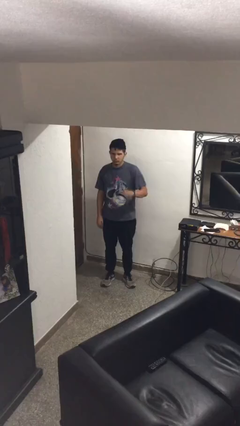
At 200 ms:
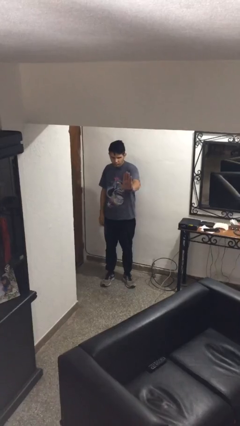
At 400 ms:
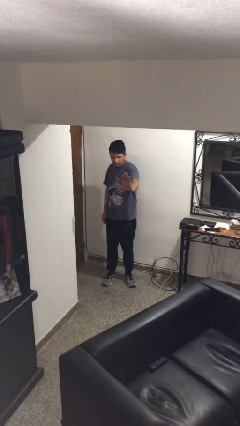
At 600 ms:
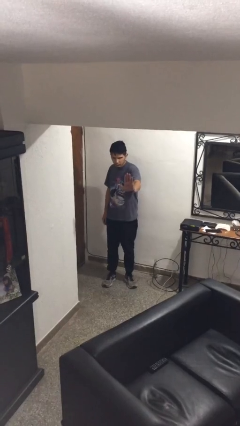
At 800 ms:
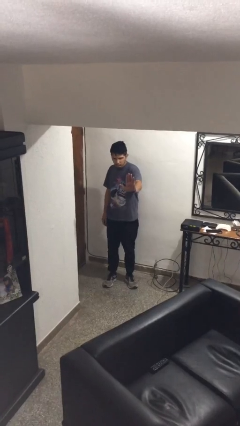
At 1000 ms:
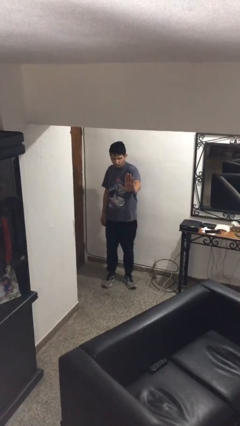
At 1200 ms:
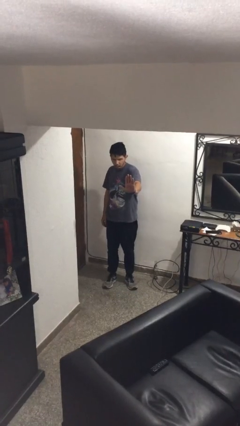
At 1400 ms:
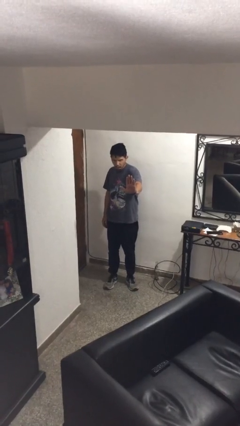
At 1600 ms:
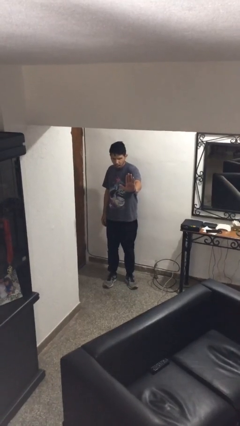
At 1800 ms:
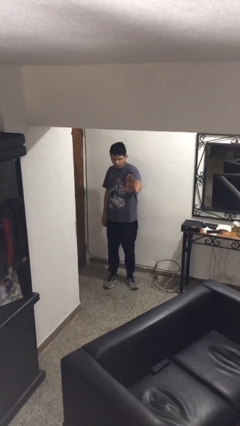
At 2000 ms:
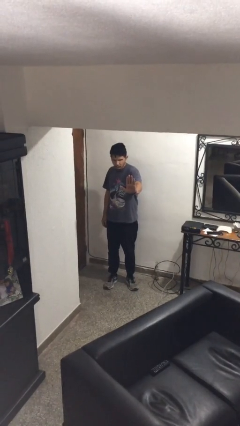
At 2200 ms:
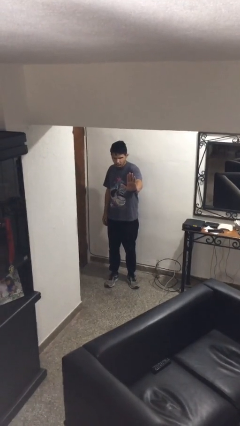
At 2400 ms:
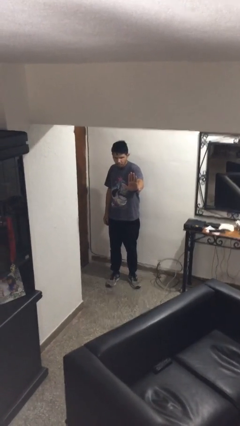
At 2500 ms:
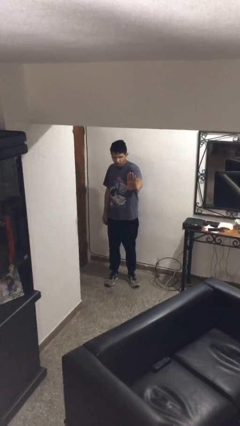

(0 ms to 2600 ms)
person gestures stop

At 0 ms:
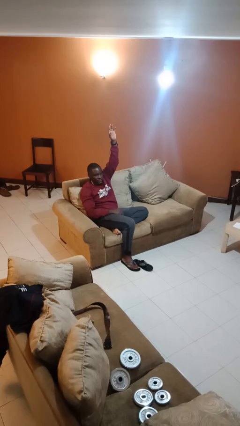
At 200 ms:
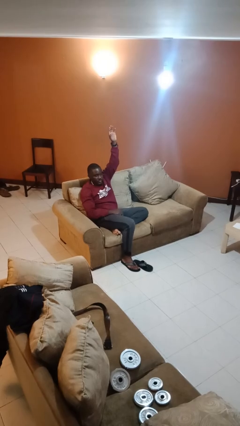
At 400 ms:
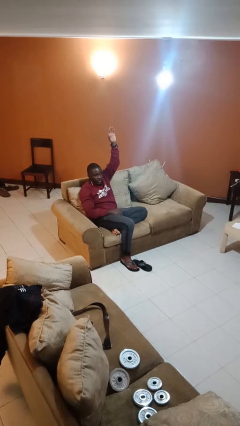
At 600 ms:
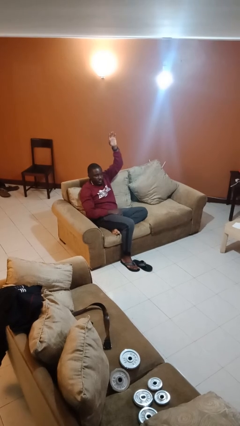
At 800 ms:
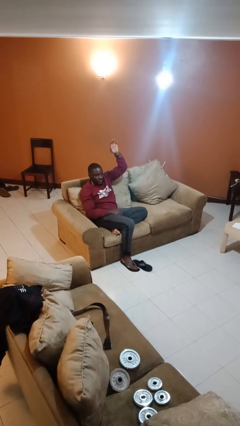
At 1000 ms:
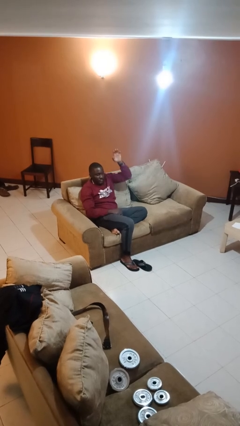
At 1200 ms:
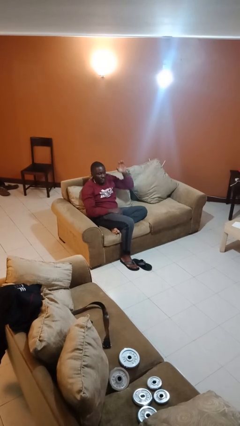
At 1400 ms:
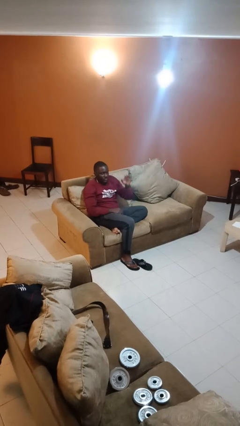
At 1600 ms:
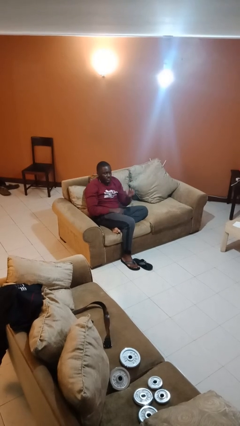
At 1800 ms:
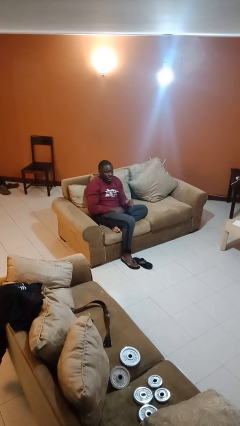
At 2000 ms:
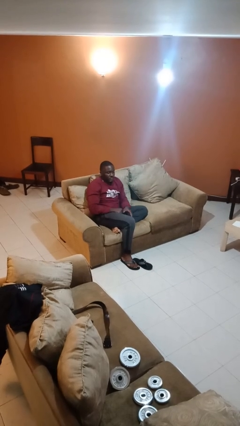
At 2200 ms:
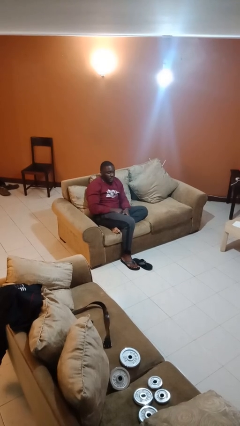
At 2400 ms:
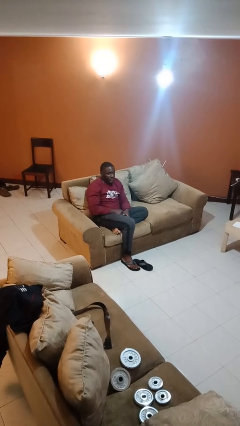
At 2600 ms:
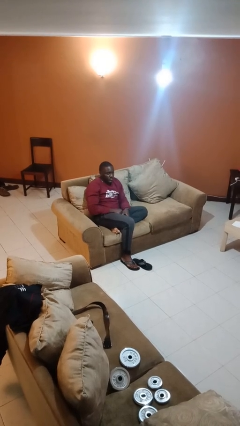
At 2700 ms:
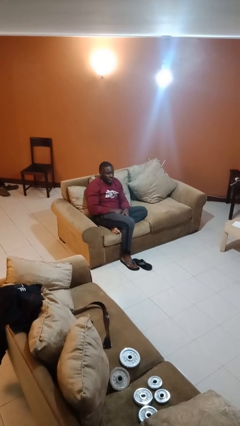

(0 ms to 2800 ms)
person gestures lower hand

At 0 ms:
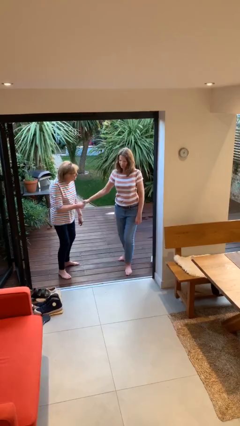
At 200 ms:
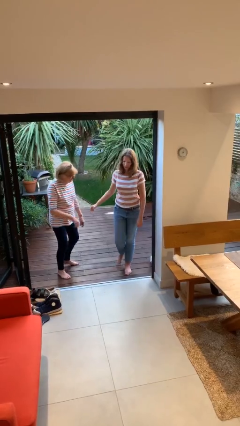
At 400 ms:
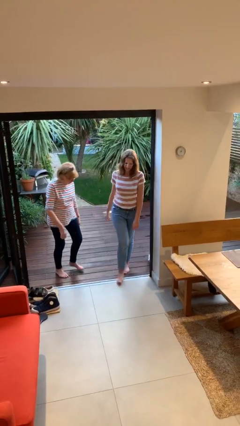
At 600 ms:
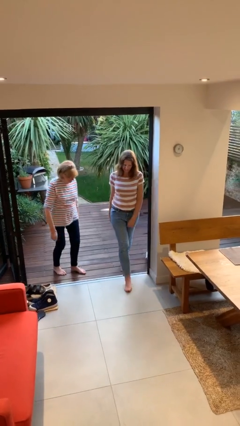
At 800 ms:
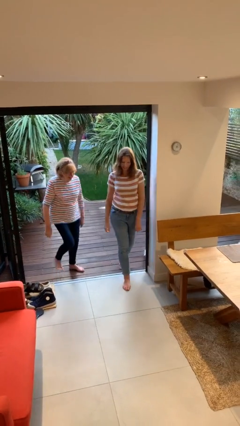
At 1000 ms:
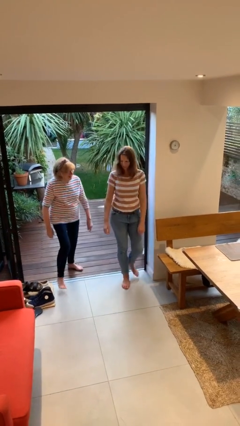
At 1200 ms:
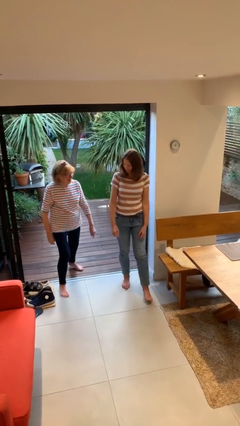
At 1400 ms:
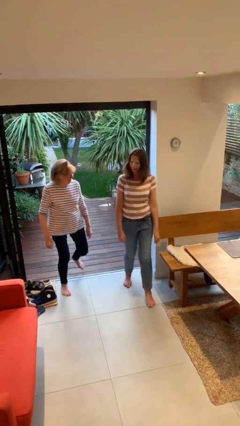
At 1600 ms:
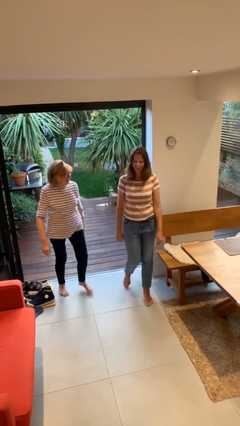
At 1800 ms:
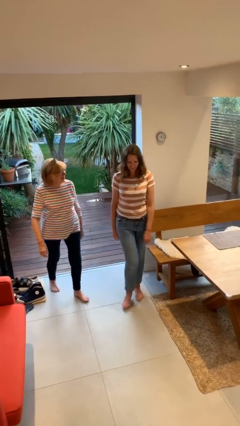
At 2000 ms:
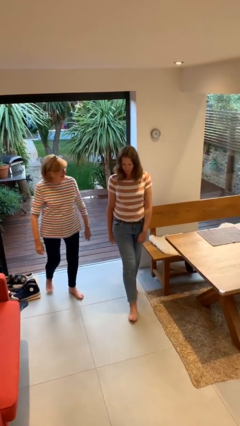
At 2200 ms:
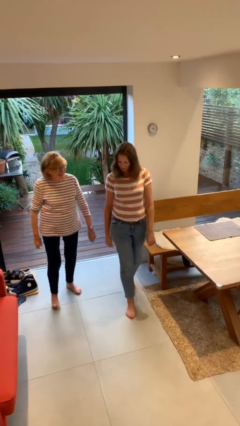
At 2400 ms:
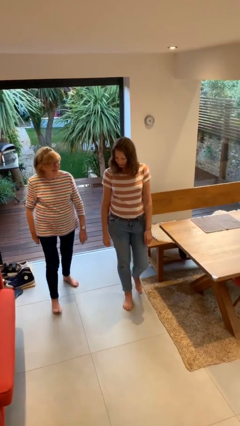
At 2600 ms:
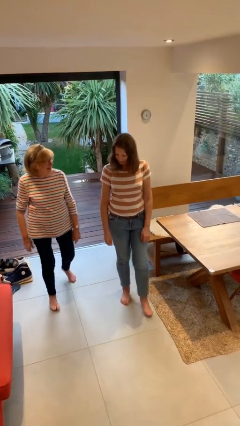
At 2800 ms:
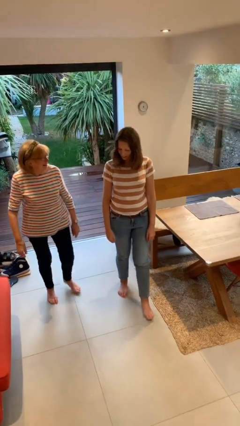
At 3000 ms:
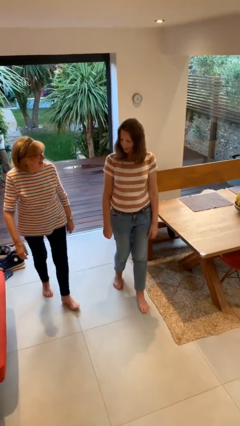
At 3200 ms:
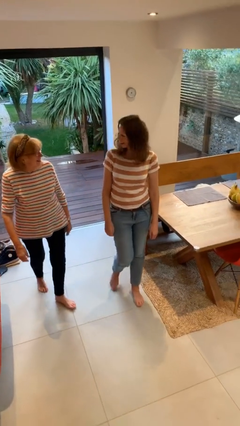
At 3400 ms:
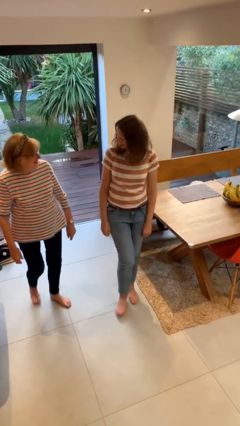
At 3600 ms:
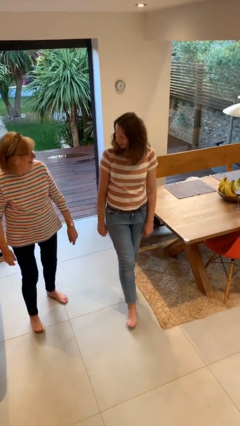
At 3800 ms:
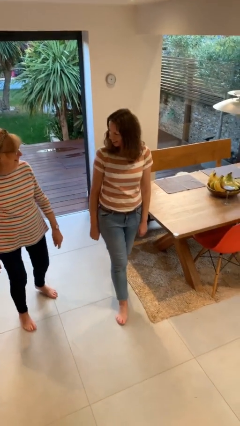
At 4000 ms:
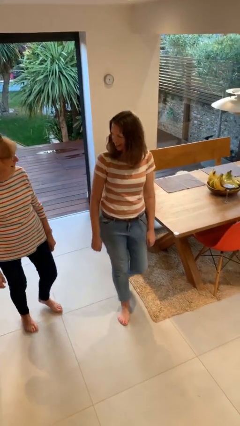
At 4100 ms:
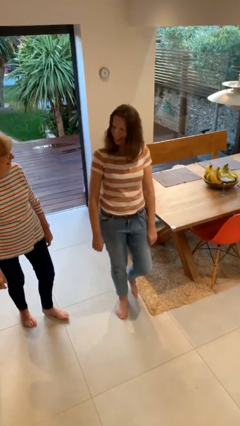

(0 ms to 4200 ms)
person talks to person

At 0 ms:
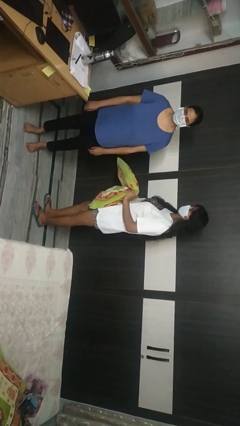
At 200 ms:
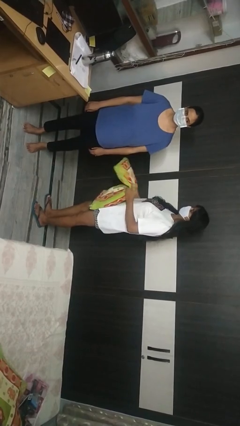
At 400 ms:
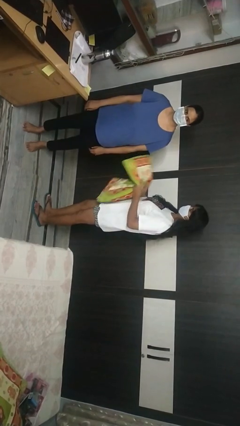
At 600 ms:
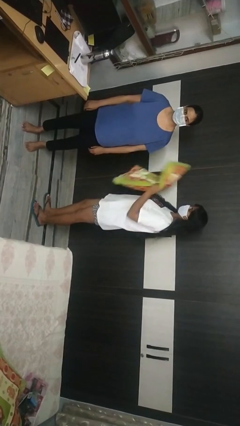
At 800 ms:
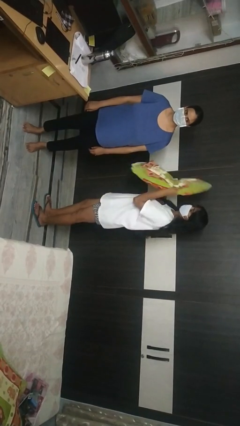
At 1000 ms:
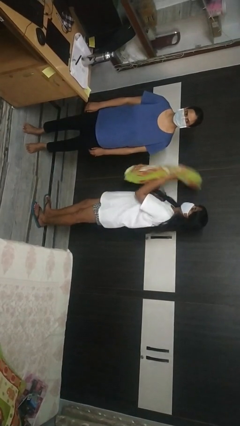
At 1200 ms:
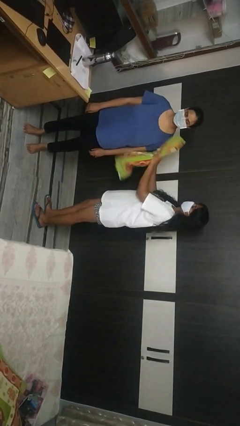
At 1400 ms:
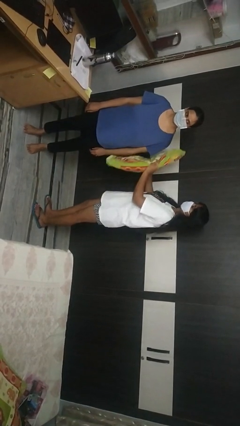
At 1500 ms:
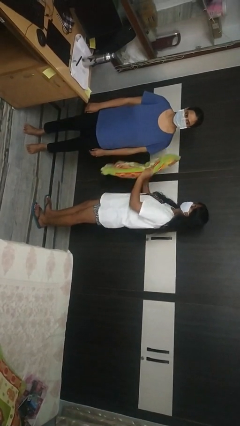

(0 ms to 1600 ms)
person hits person with pillow

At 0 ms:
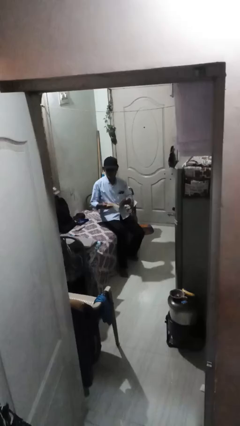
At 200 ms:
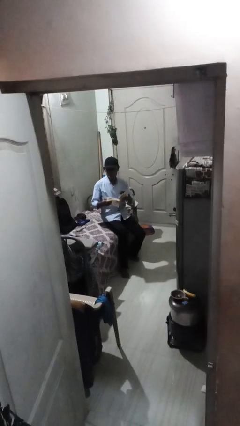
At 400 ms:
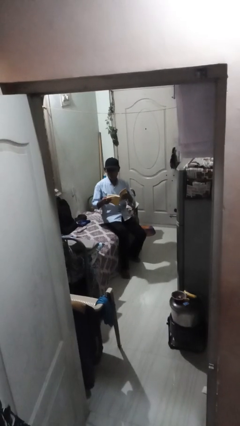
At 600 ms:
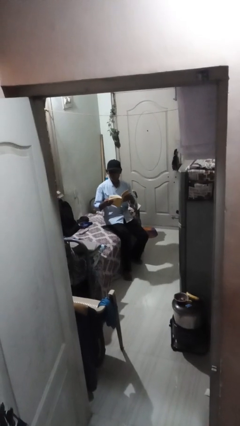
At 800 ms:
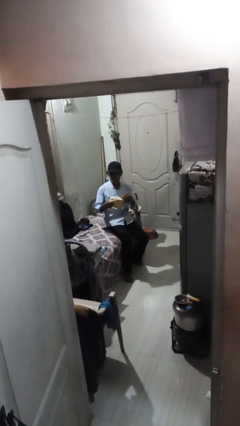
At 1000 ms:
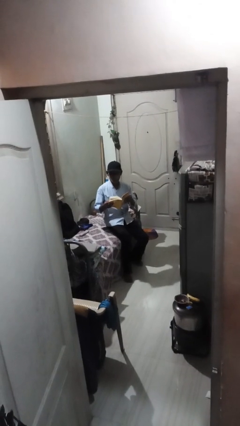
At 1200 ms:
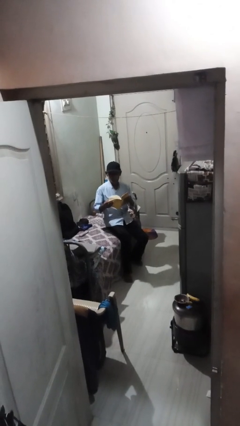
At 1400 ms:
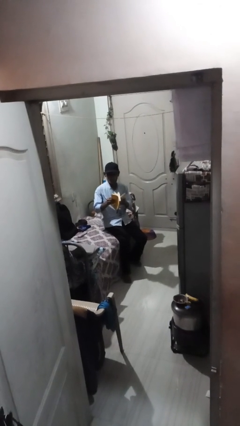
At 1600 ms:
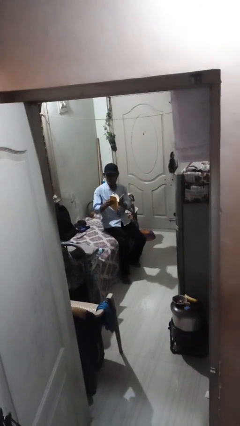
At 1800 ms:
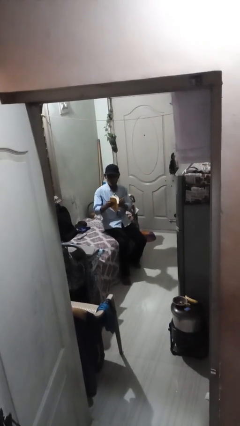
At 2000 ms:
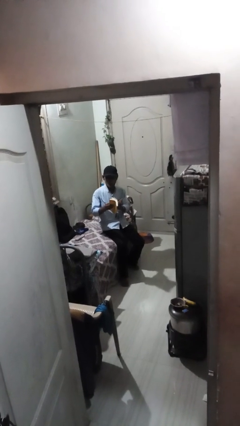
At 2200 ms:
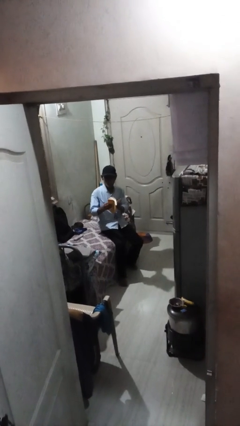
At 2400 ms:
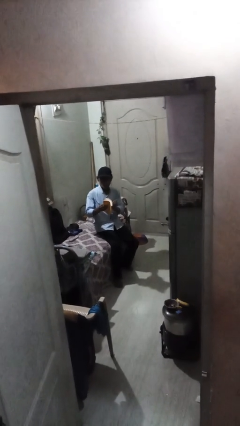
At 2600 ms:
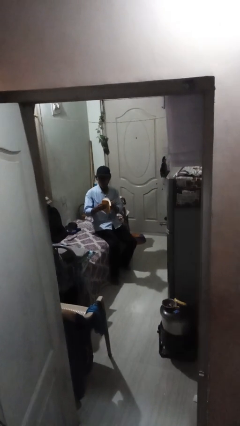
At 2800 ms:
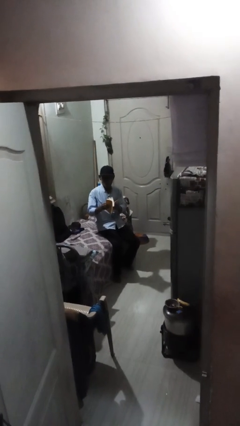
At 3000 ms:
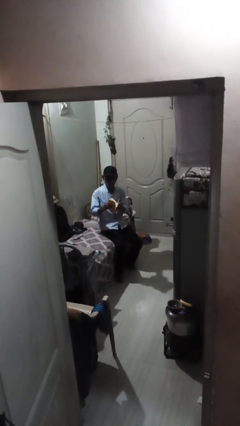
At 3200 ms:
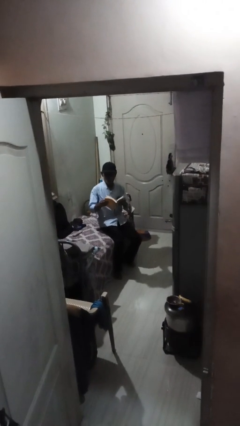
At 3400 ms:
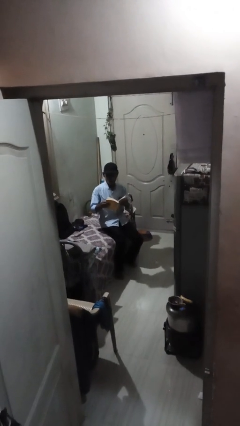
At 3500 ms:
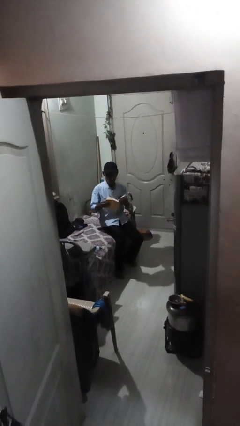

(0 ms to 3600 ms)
person reads book

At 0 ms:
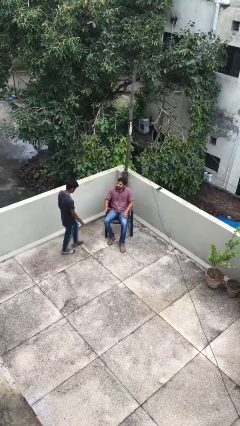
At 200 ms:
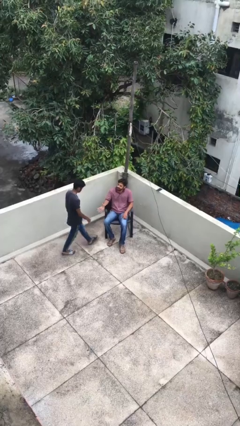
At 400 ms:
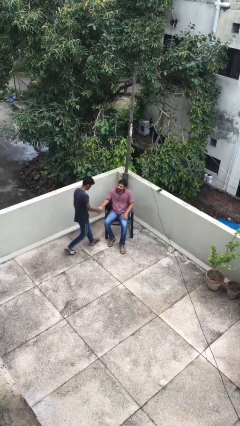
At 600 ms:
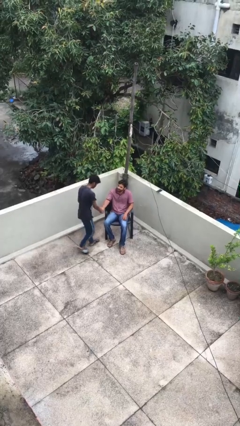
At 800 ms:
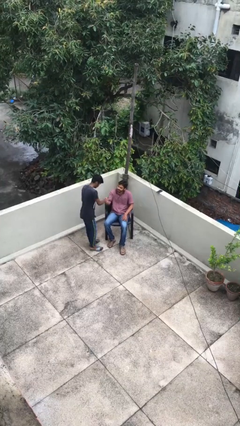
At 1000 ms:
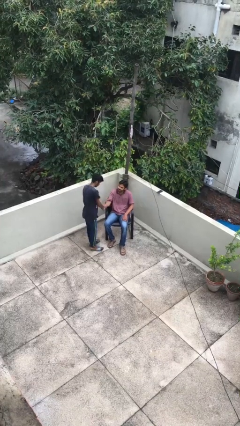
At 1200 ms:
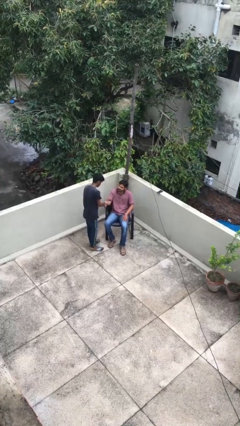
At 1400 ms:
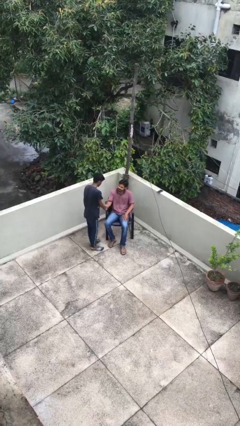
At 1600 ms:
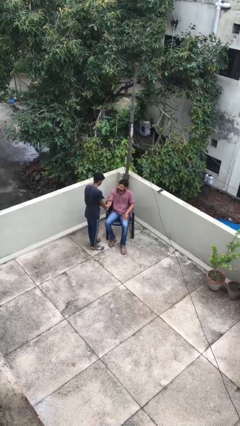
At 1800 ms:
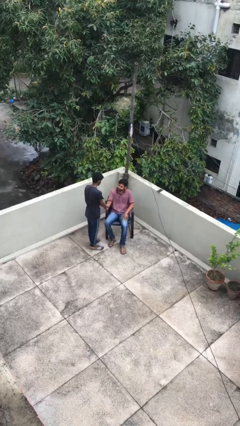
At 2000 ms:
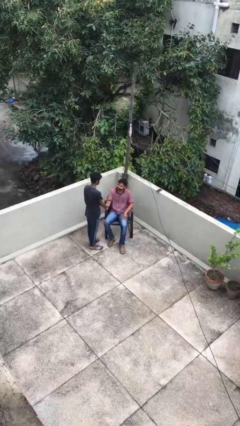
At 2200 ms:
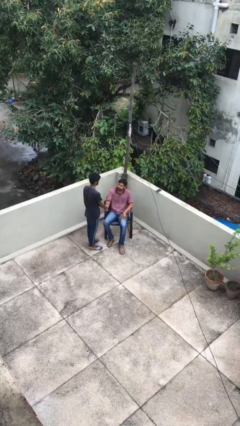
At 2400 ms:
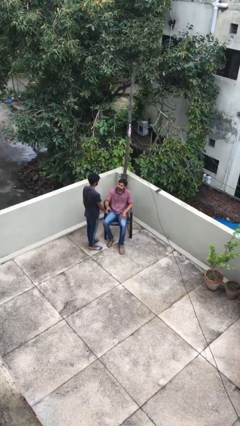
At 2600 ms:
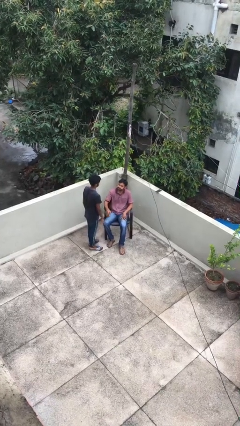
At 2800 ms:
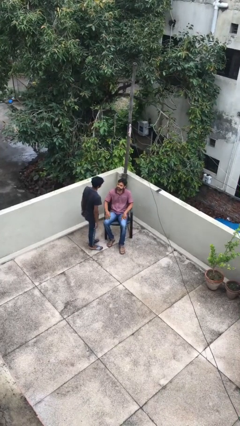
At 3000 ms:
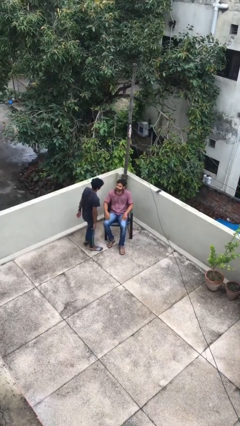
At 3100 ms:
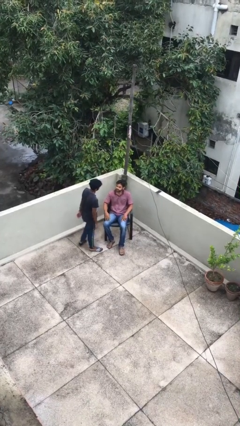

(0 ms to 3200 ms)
person shakes hand
